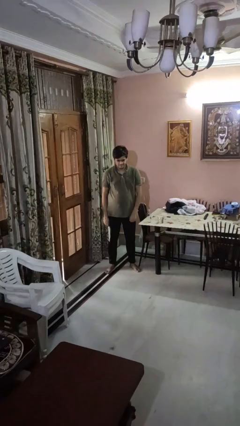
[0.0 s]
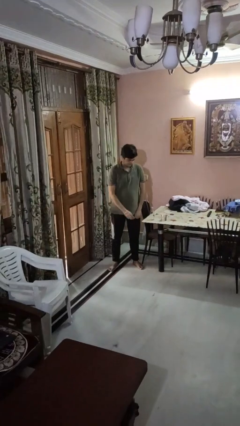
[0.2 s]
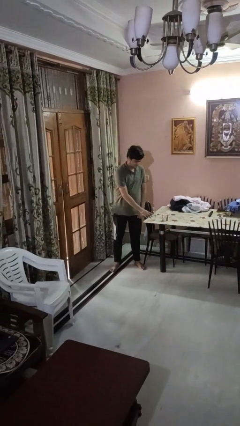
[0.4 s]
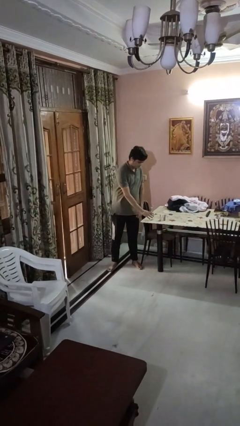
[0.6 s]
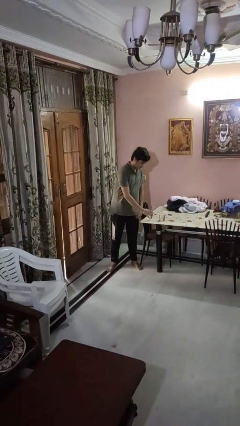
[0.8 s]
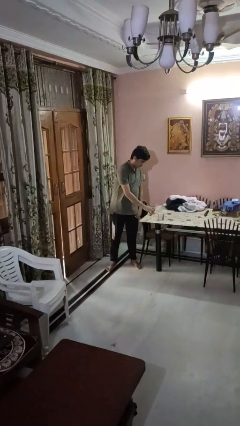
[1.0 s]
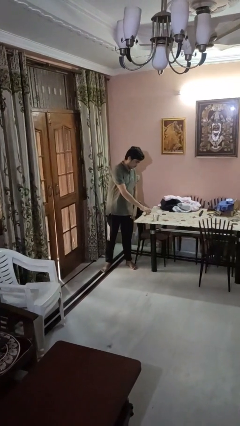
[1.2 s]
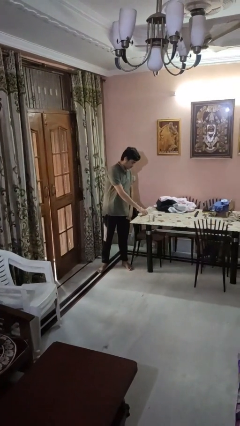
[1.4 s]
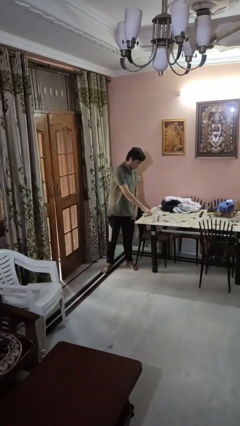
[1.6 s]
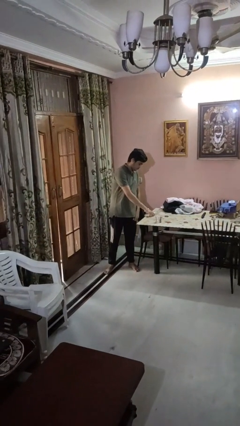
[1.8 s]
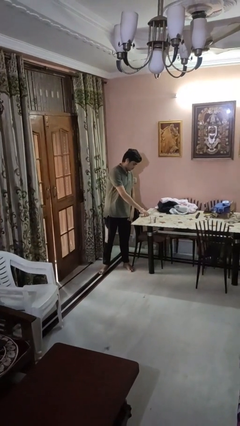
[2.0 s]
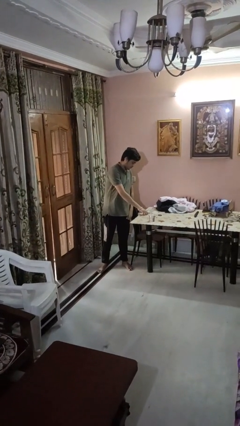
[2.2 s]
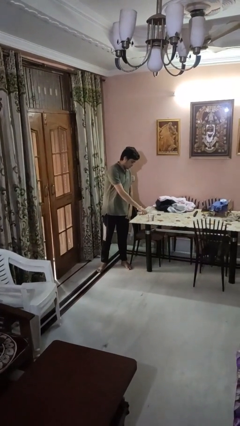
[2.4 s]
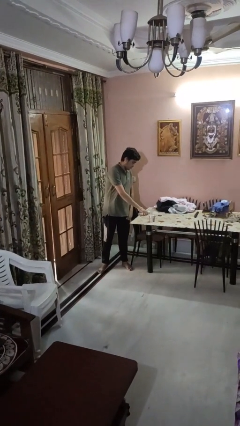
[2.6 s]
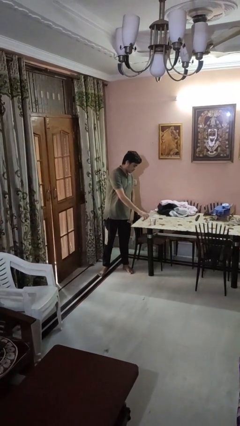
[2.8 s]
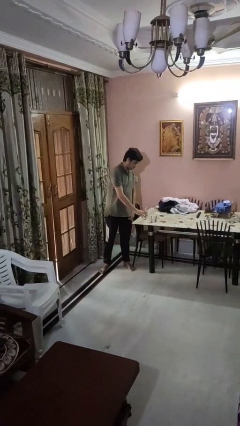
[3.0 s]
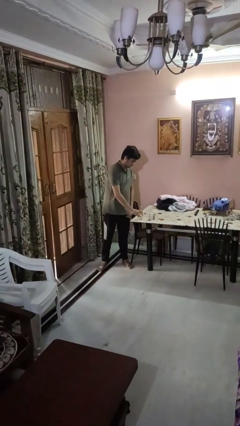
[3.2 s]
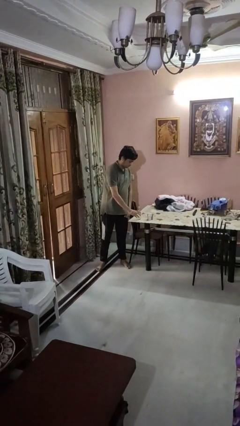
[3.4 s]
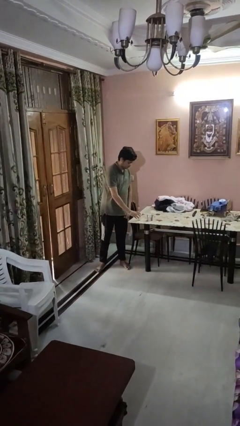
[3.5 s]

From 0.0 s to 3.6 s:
person pours liquid into cup

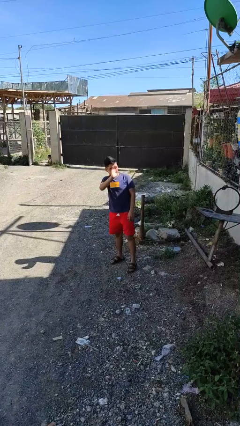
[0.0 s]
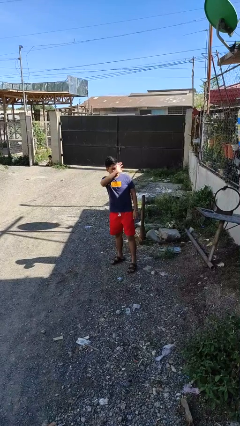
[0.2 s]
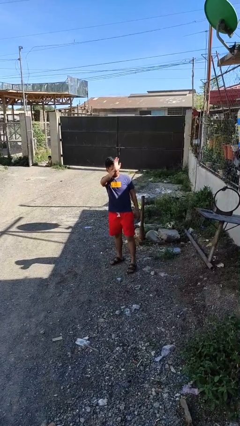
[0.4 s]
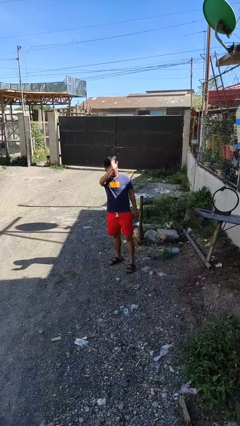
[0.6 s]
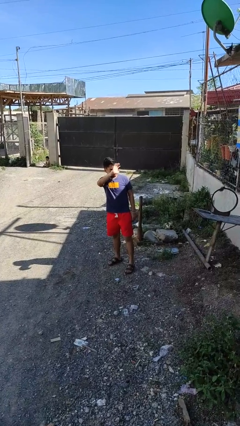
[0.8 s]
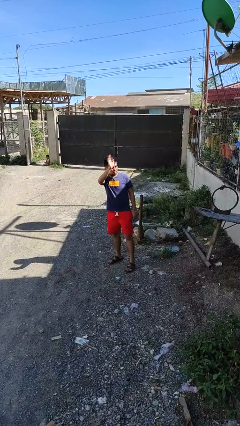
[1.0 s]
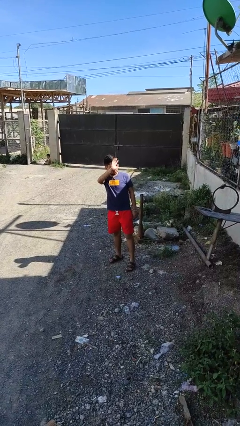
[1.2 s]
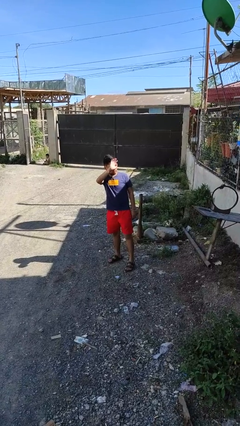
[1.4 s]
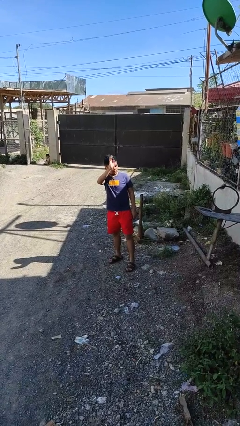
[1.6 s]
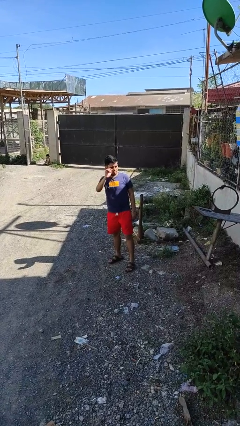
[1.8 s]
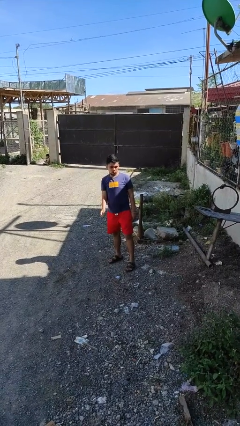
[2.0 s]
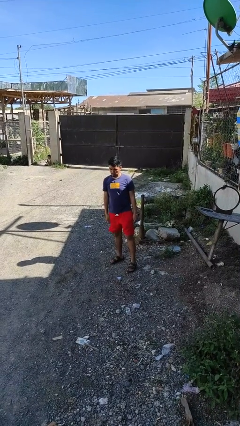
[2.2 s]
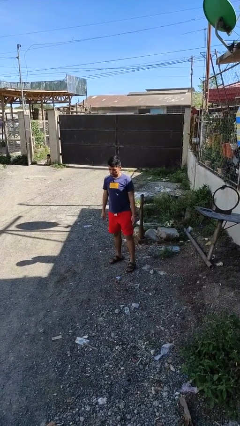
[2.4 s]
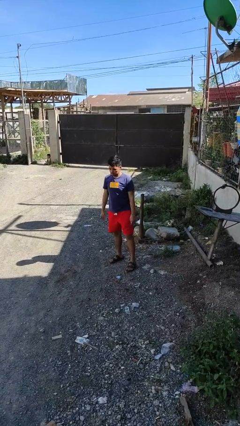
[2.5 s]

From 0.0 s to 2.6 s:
person waves at person

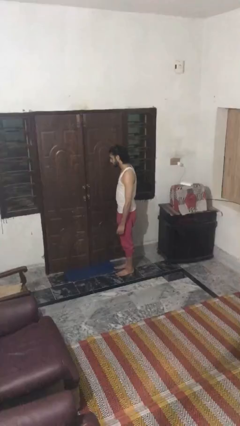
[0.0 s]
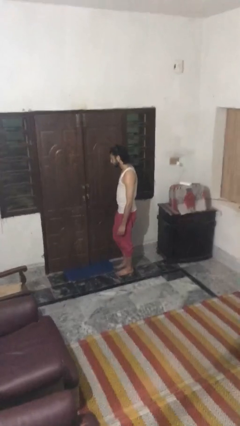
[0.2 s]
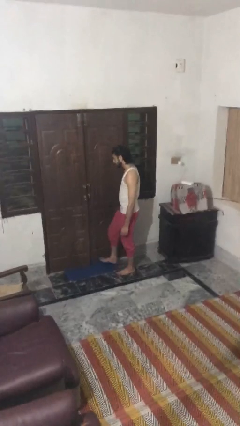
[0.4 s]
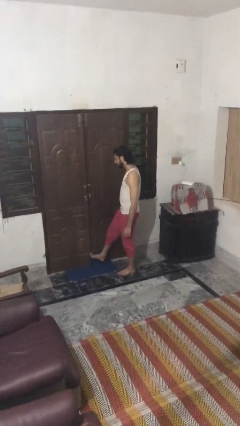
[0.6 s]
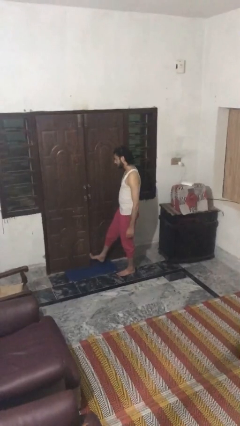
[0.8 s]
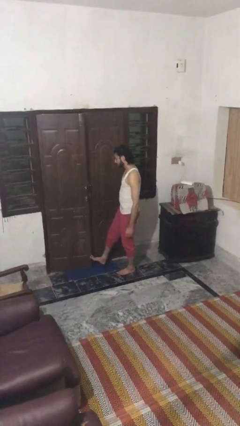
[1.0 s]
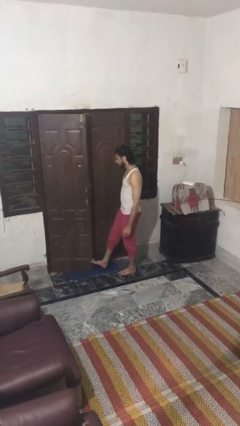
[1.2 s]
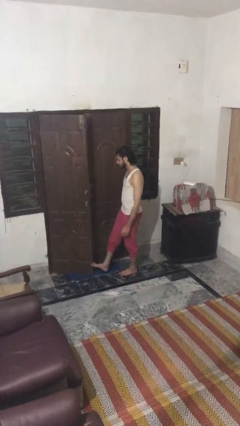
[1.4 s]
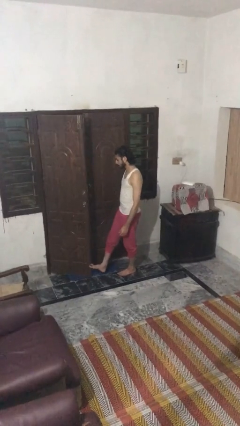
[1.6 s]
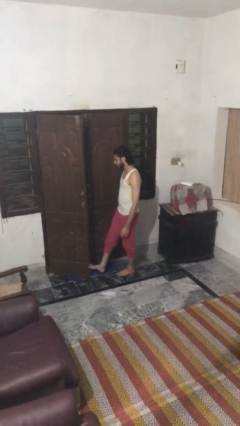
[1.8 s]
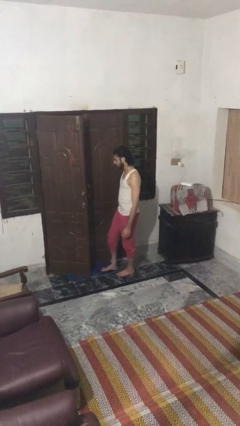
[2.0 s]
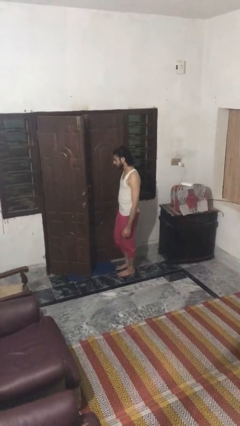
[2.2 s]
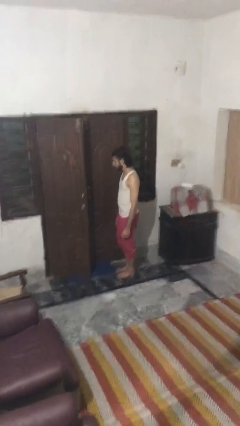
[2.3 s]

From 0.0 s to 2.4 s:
person opens facility door

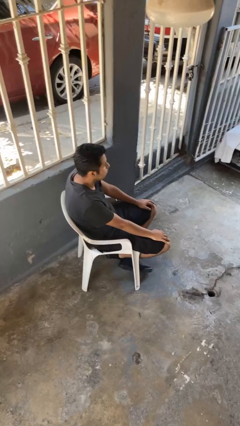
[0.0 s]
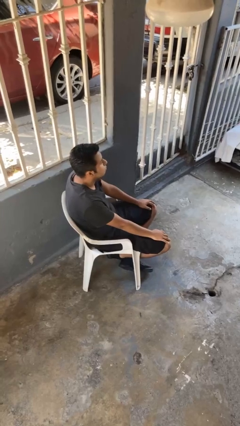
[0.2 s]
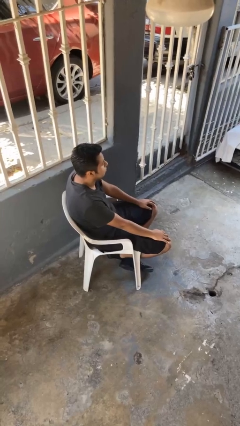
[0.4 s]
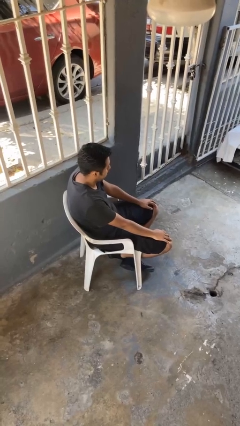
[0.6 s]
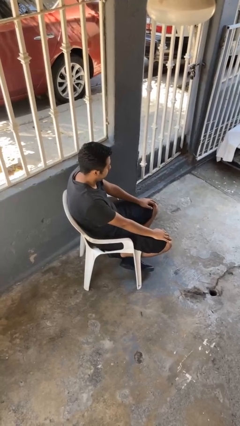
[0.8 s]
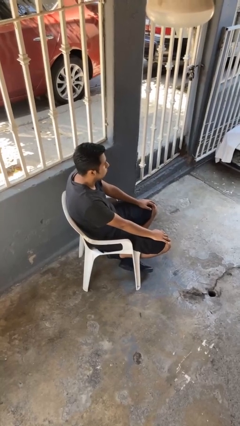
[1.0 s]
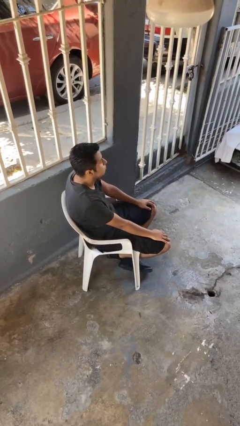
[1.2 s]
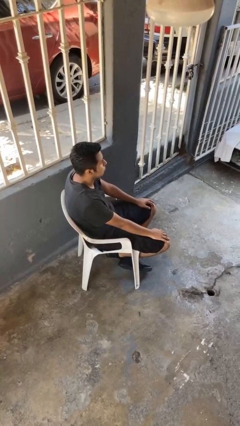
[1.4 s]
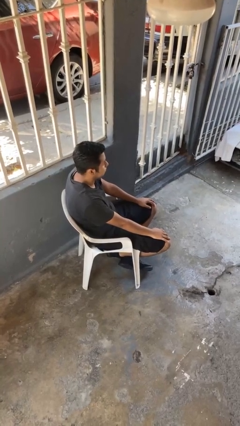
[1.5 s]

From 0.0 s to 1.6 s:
person nods head

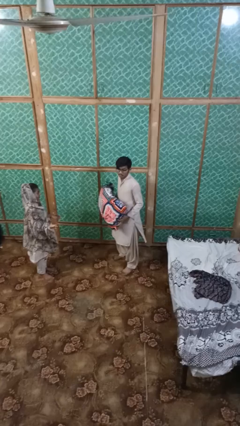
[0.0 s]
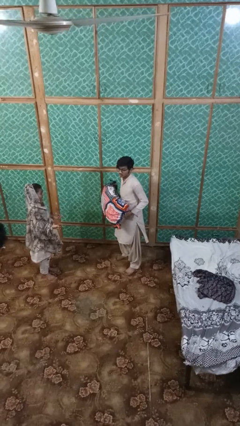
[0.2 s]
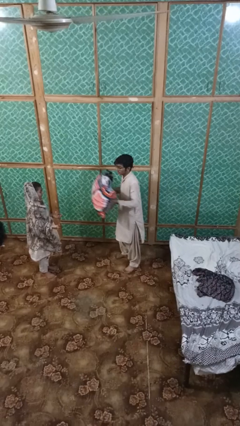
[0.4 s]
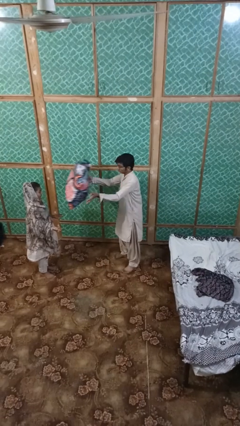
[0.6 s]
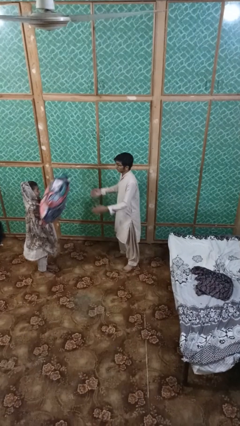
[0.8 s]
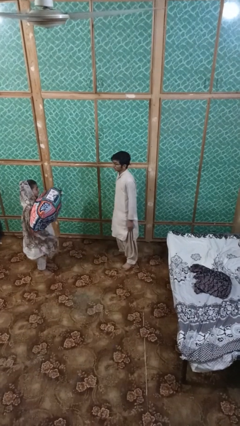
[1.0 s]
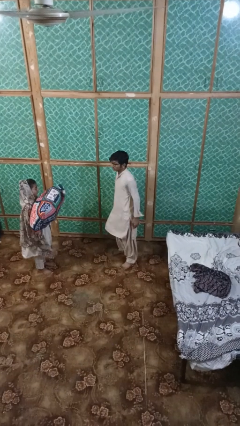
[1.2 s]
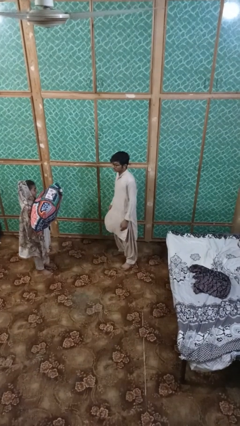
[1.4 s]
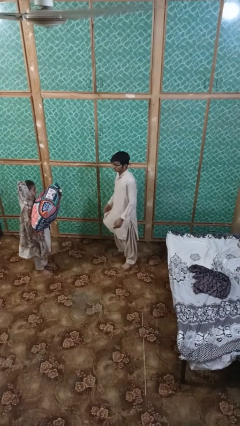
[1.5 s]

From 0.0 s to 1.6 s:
person throws object to person

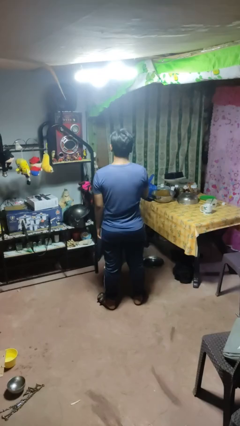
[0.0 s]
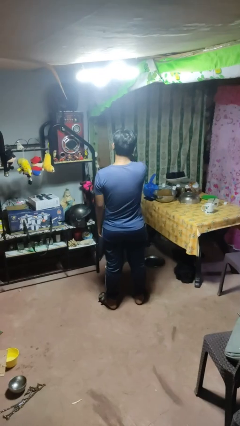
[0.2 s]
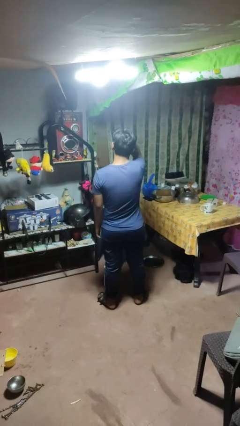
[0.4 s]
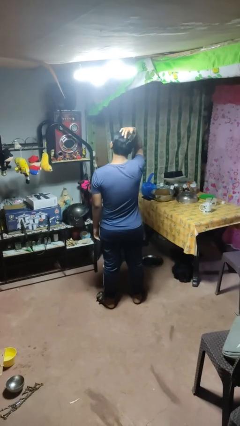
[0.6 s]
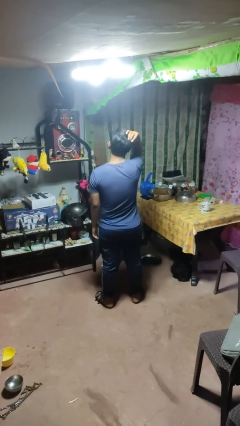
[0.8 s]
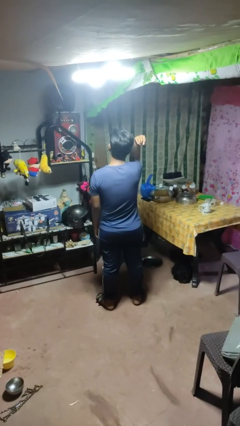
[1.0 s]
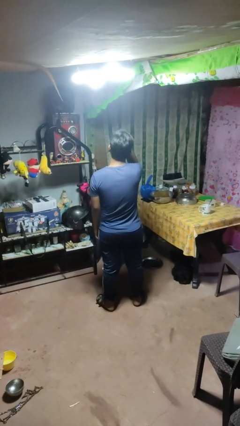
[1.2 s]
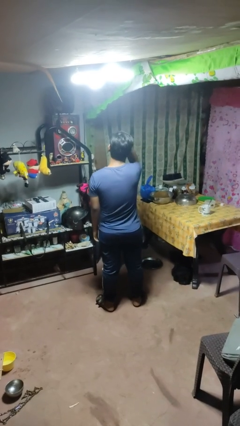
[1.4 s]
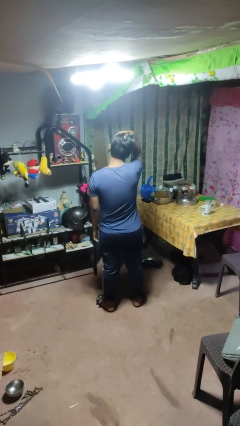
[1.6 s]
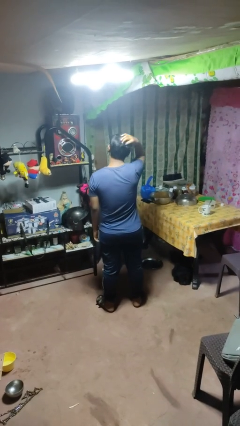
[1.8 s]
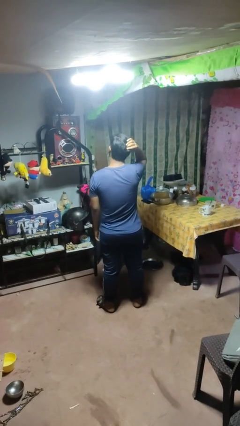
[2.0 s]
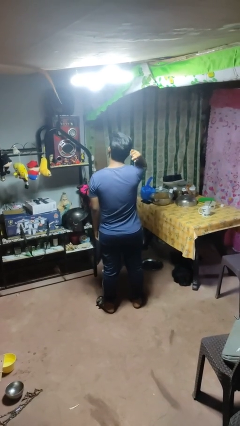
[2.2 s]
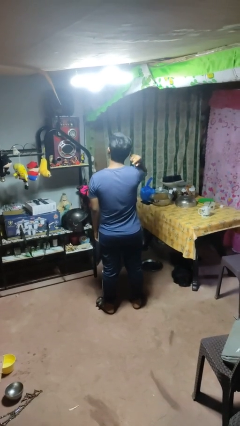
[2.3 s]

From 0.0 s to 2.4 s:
person strokes hair

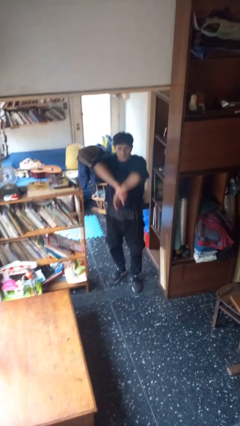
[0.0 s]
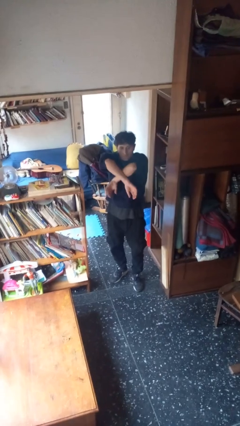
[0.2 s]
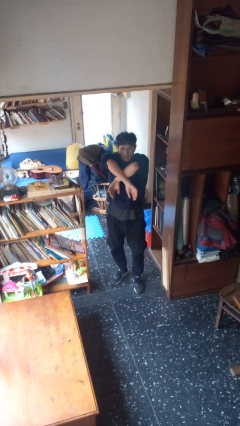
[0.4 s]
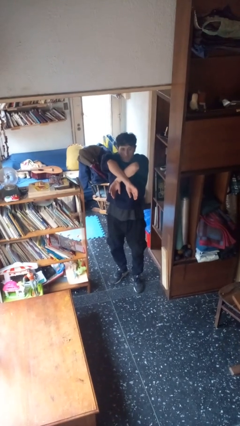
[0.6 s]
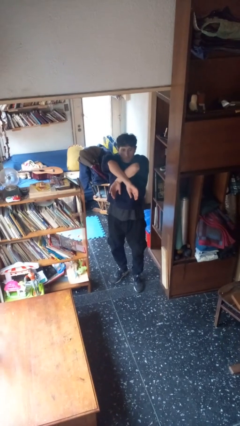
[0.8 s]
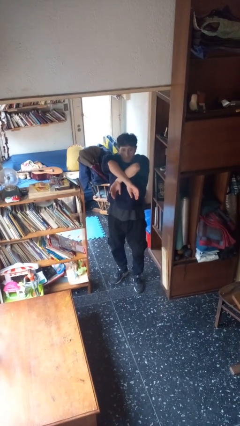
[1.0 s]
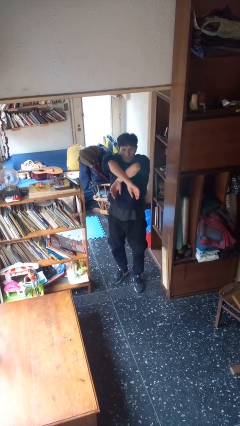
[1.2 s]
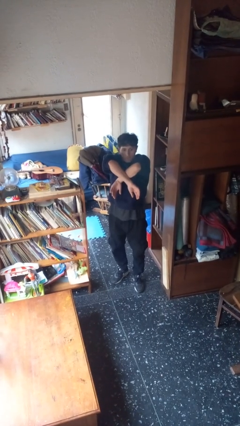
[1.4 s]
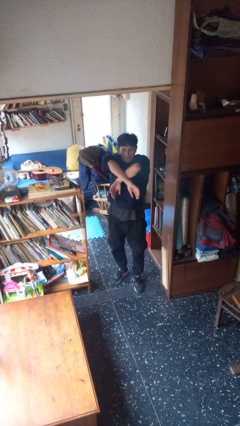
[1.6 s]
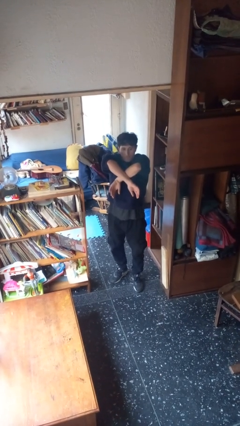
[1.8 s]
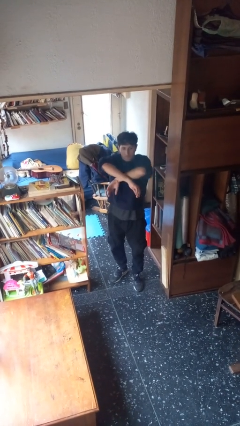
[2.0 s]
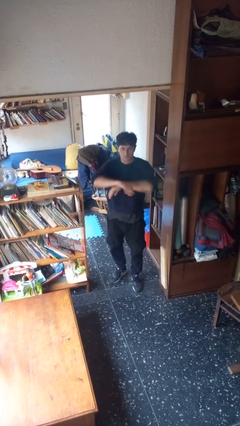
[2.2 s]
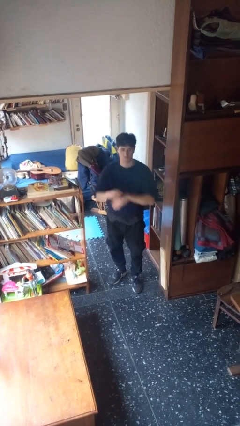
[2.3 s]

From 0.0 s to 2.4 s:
person gestures arms x

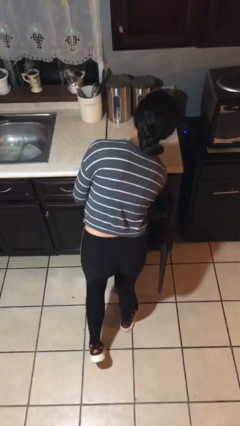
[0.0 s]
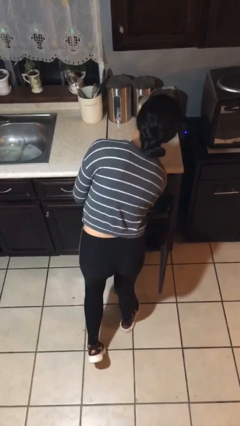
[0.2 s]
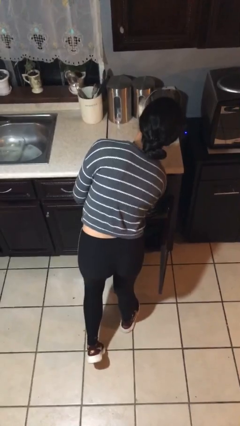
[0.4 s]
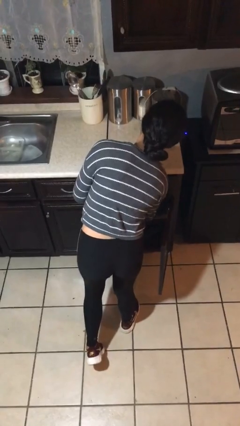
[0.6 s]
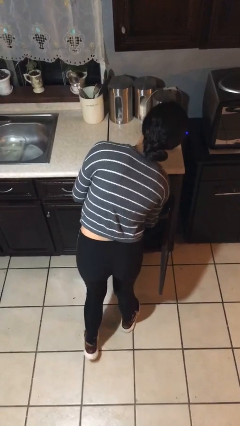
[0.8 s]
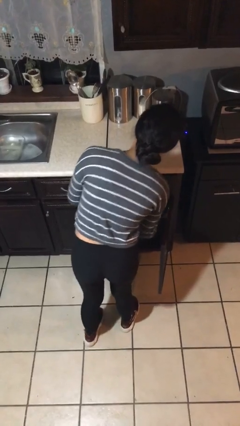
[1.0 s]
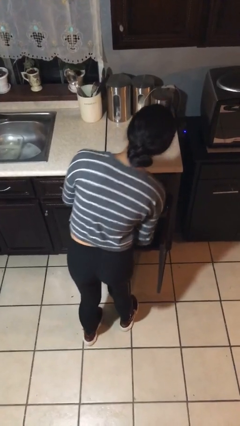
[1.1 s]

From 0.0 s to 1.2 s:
person puts object in cabinet
